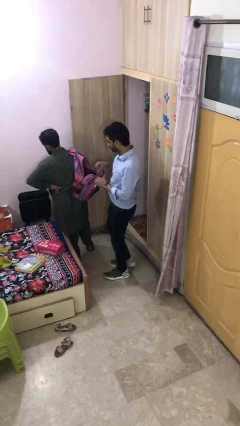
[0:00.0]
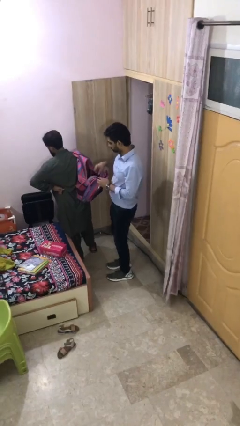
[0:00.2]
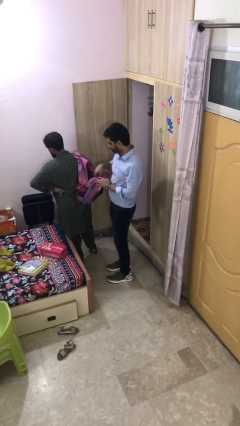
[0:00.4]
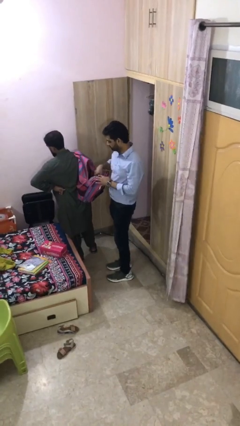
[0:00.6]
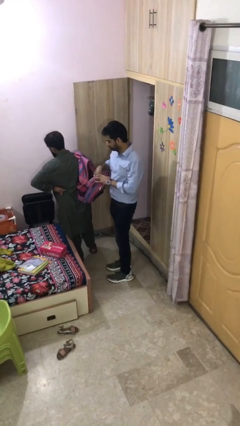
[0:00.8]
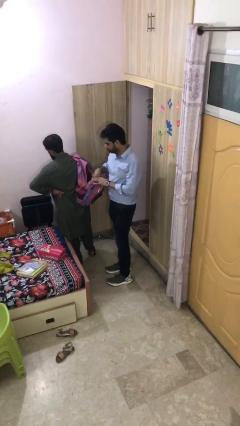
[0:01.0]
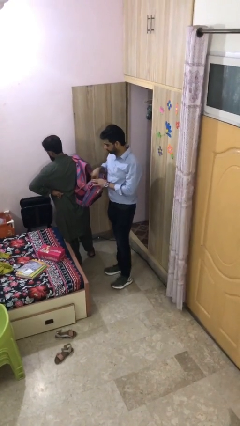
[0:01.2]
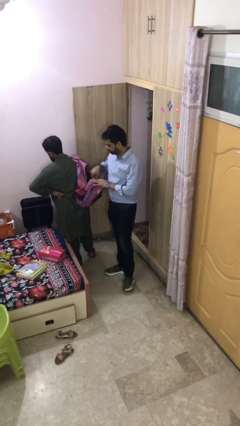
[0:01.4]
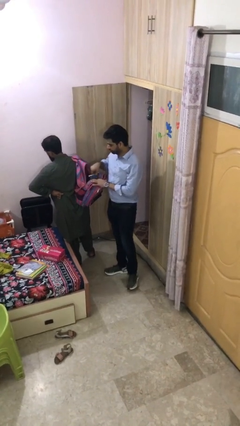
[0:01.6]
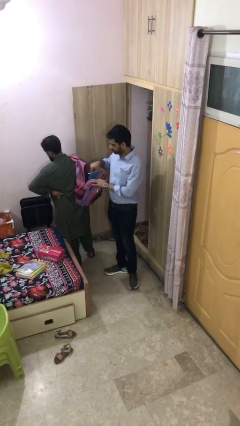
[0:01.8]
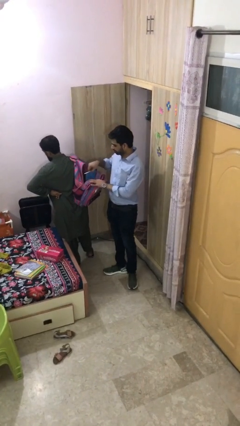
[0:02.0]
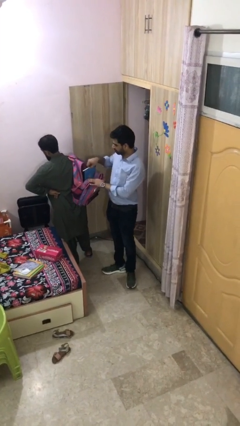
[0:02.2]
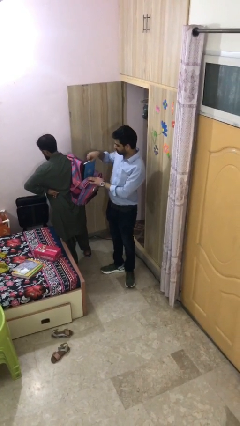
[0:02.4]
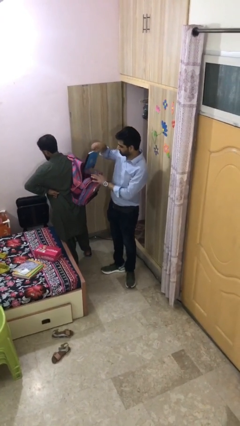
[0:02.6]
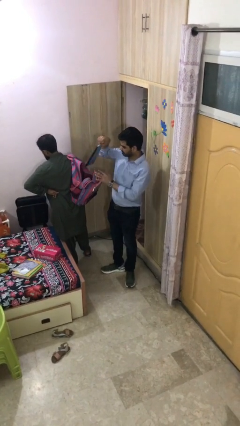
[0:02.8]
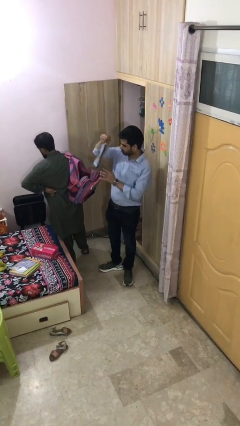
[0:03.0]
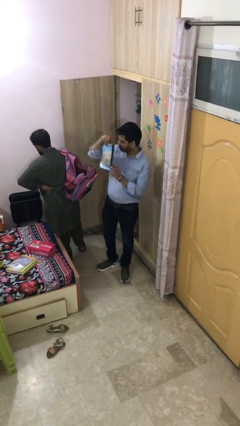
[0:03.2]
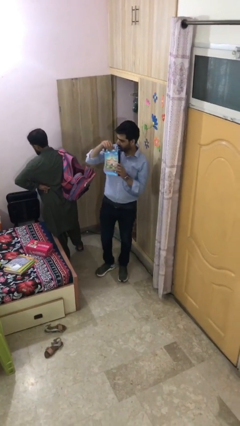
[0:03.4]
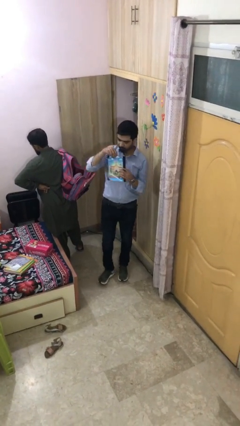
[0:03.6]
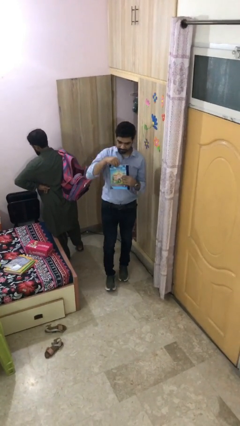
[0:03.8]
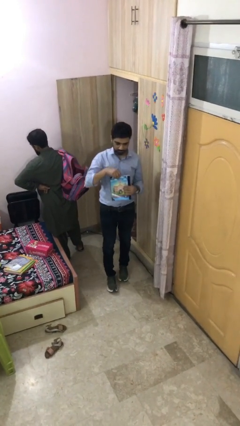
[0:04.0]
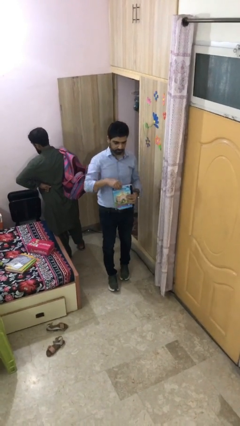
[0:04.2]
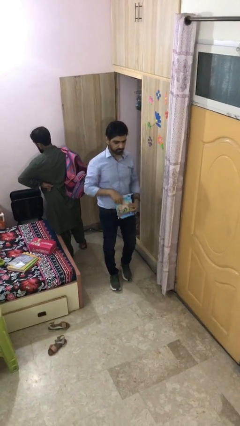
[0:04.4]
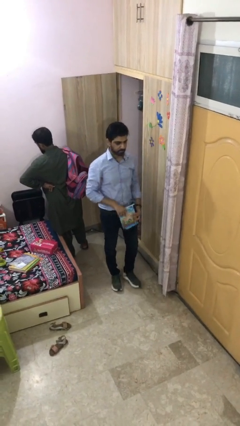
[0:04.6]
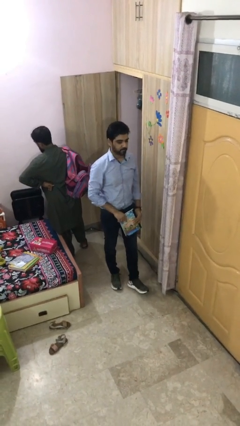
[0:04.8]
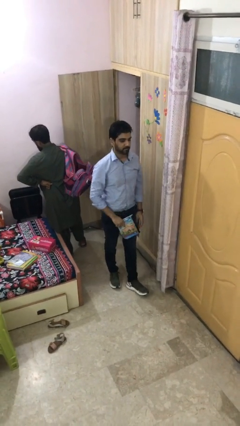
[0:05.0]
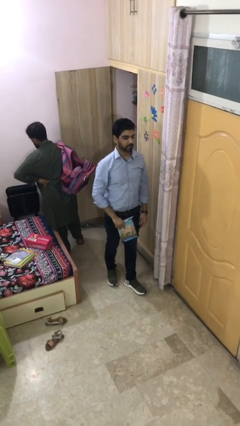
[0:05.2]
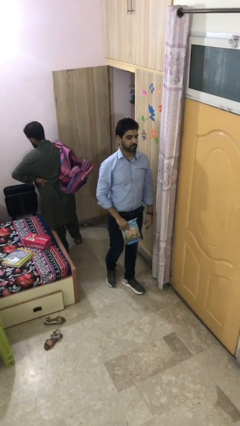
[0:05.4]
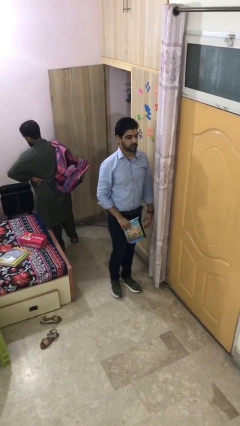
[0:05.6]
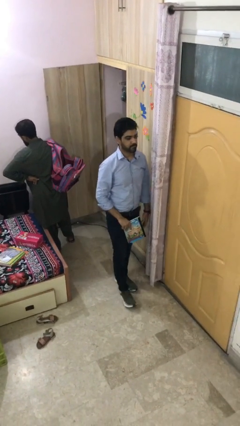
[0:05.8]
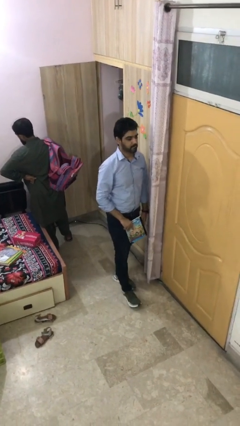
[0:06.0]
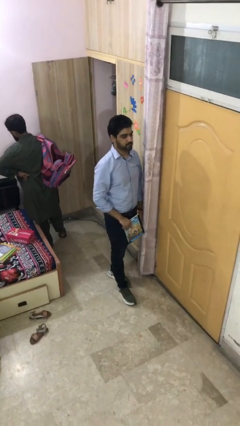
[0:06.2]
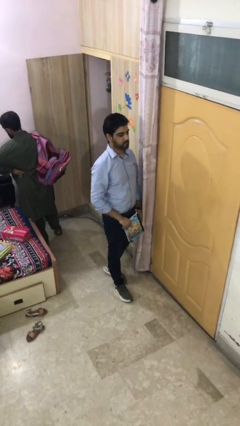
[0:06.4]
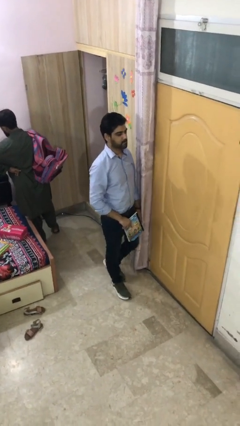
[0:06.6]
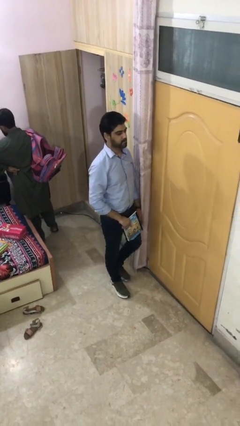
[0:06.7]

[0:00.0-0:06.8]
person steals object from person

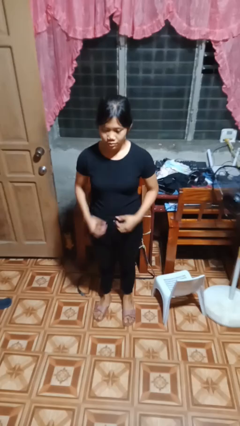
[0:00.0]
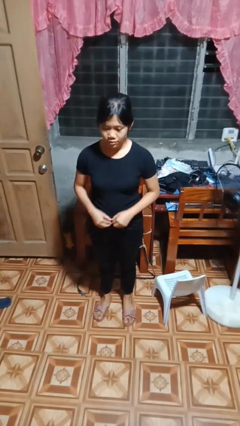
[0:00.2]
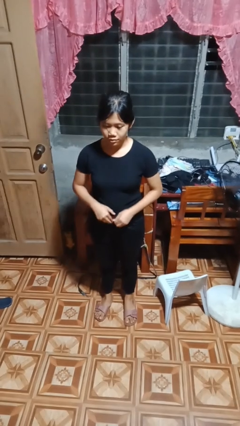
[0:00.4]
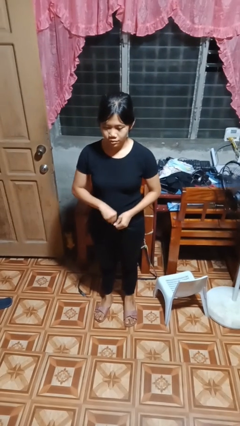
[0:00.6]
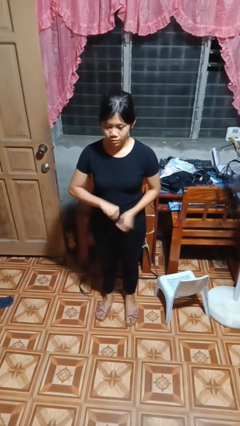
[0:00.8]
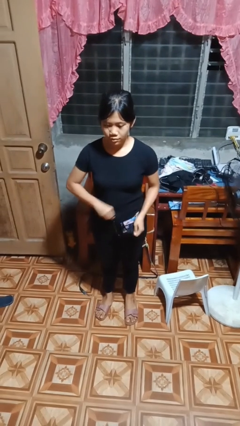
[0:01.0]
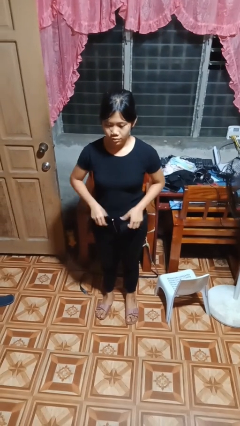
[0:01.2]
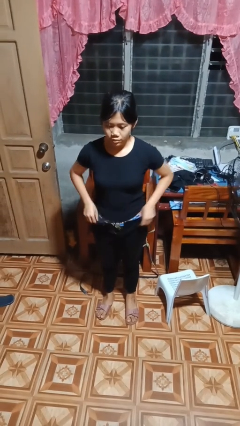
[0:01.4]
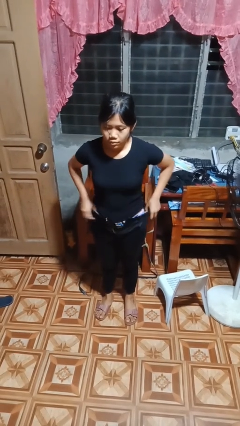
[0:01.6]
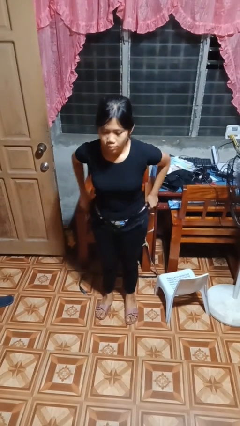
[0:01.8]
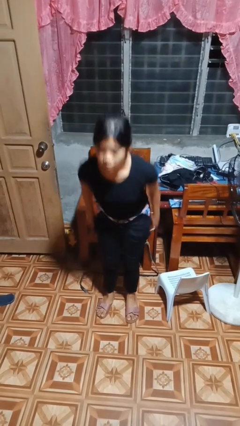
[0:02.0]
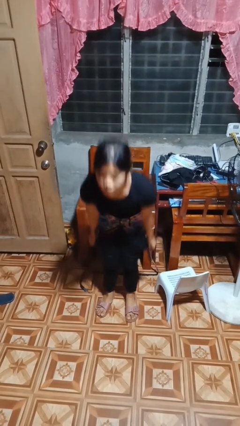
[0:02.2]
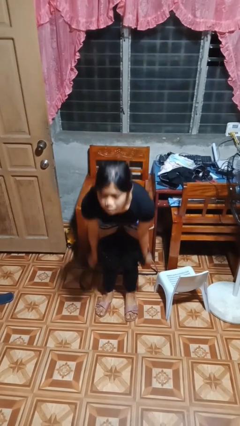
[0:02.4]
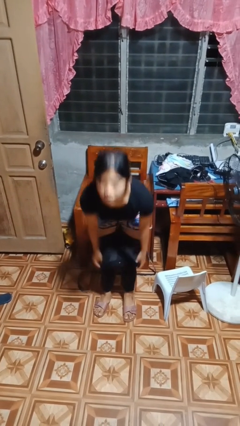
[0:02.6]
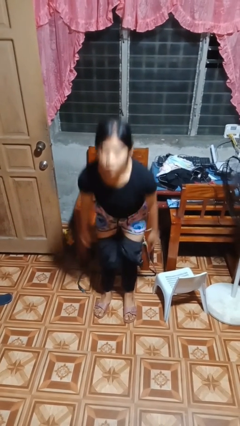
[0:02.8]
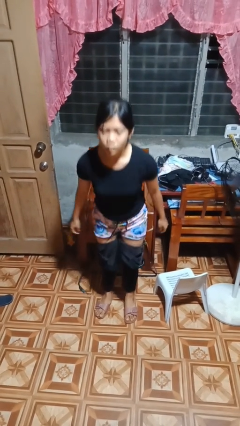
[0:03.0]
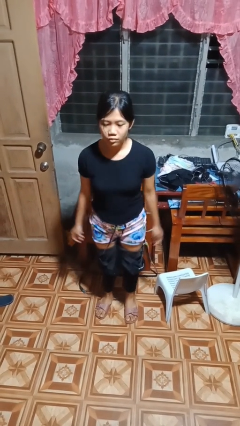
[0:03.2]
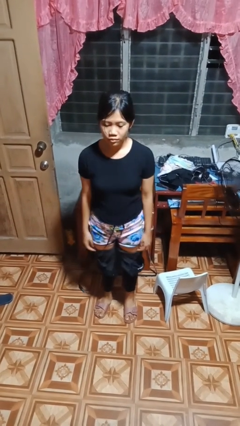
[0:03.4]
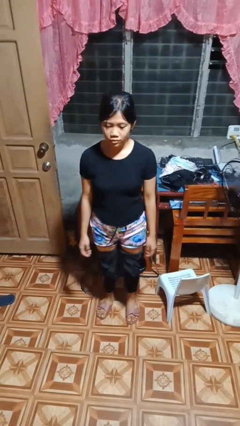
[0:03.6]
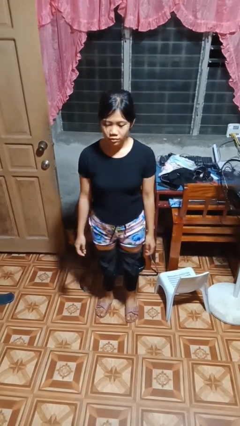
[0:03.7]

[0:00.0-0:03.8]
person takes off pants

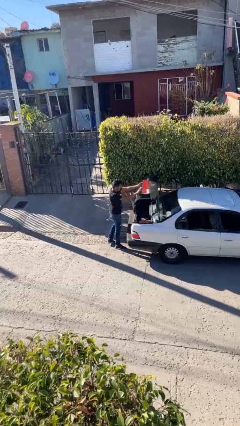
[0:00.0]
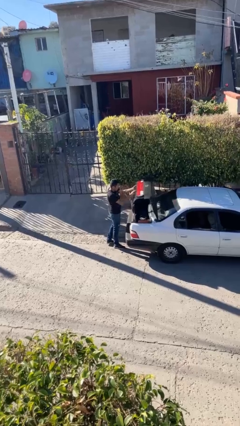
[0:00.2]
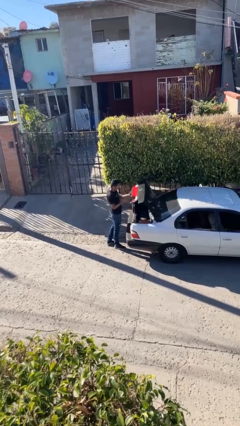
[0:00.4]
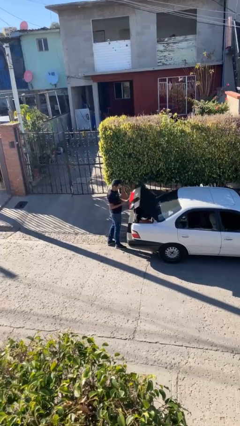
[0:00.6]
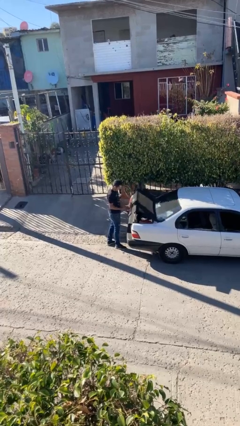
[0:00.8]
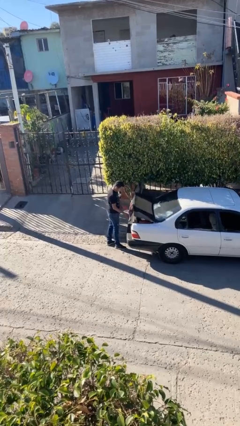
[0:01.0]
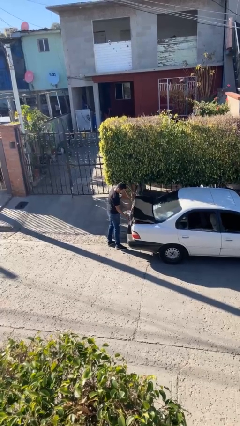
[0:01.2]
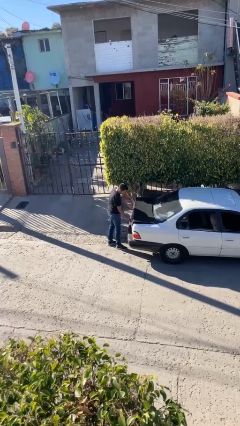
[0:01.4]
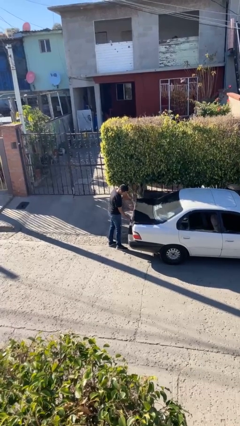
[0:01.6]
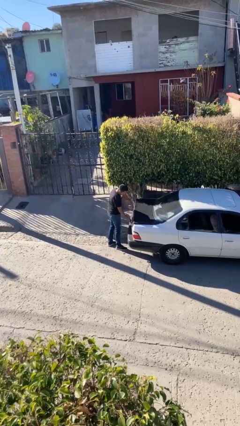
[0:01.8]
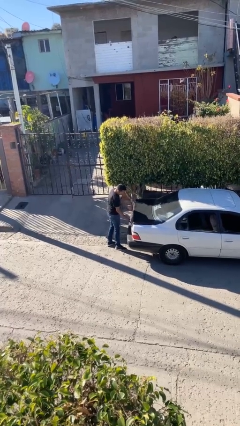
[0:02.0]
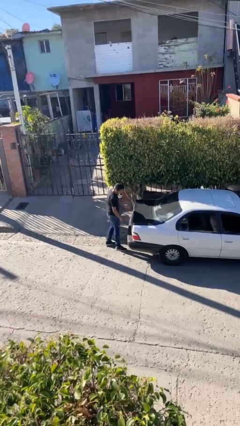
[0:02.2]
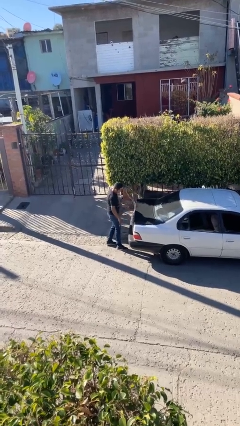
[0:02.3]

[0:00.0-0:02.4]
person closes car trunk

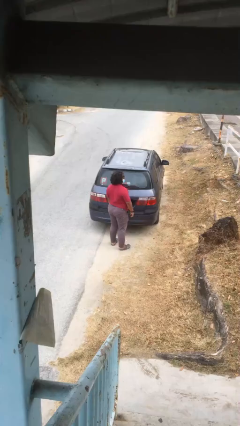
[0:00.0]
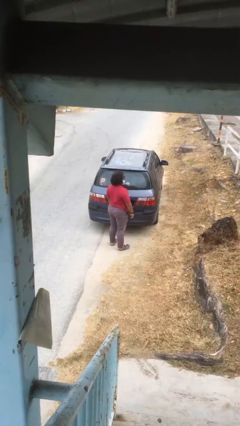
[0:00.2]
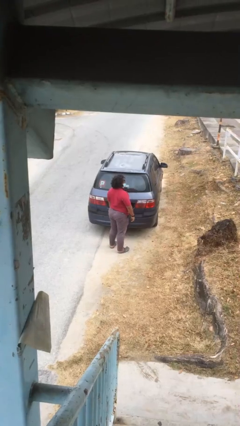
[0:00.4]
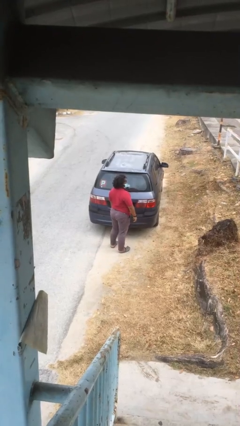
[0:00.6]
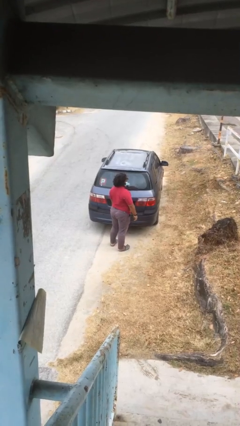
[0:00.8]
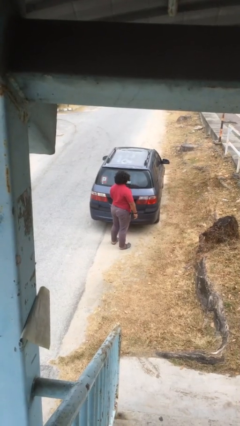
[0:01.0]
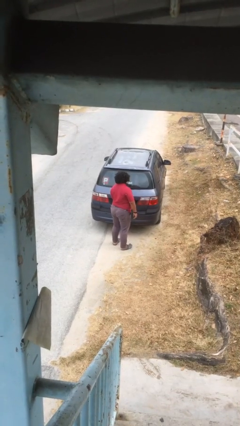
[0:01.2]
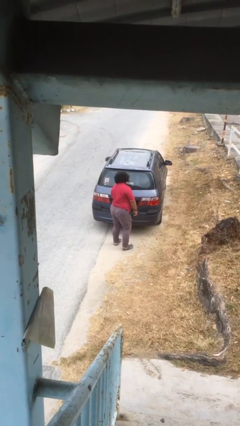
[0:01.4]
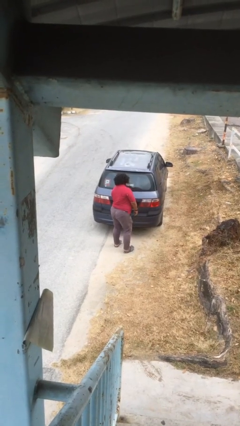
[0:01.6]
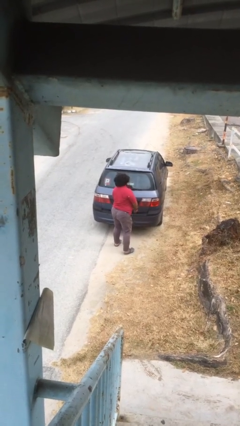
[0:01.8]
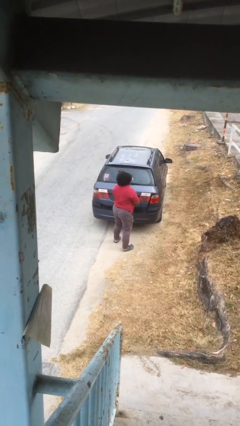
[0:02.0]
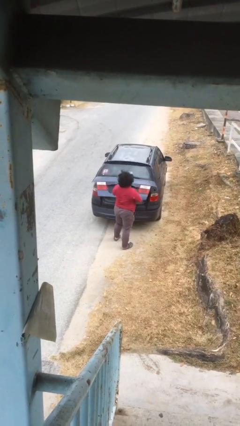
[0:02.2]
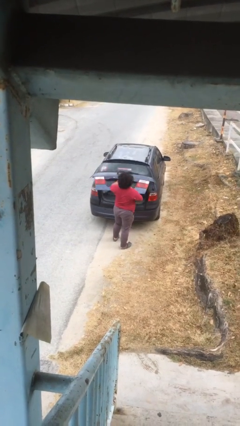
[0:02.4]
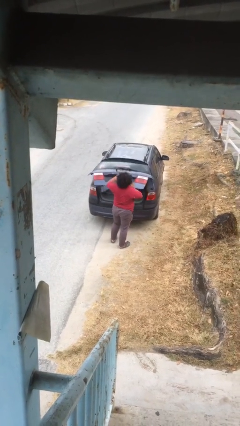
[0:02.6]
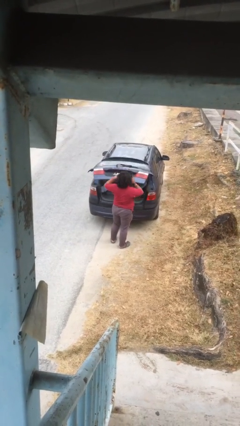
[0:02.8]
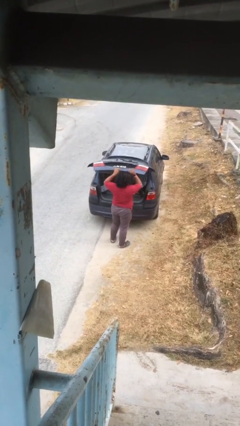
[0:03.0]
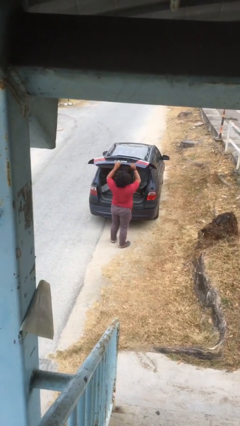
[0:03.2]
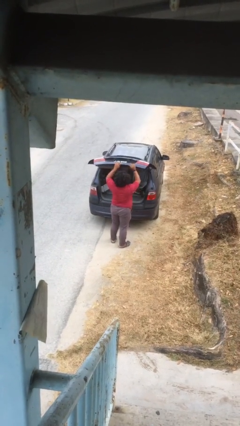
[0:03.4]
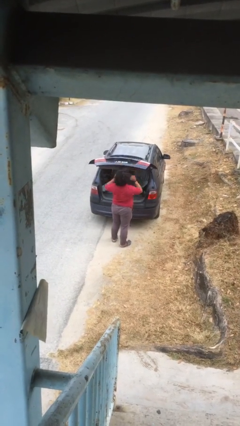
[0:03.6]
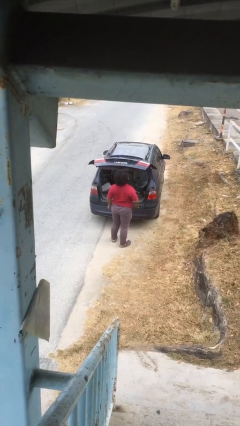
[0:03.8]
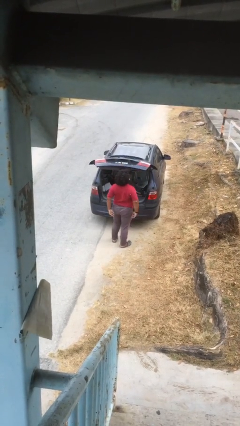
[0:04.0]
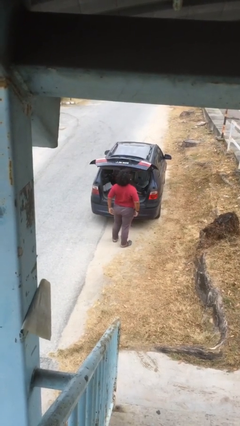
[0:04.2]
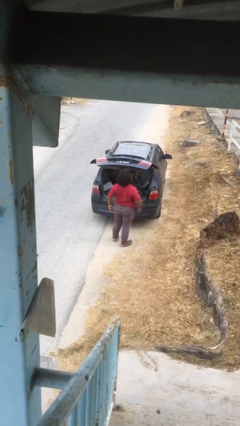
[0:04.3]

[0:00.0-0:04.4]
person opens car trunk
